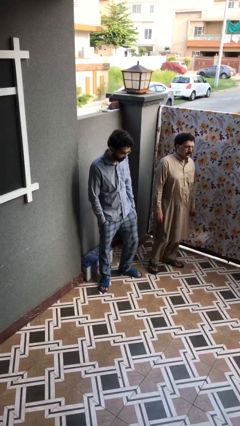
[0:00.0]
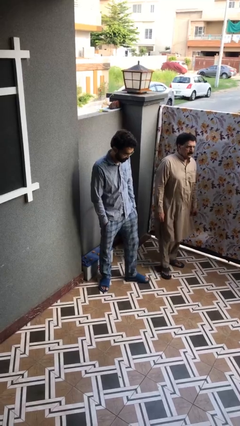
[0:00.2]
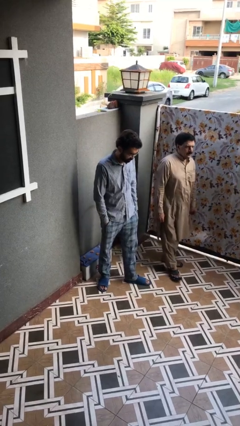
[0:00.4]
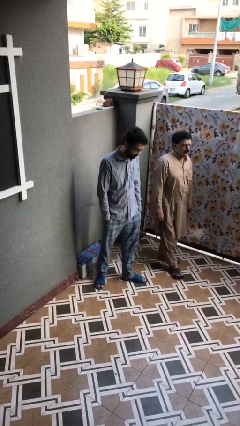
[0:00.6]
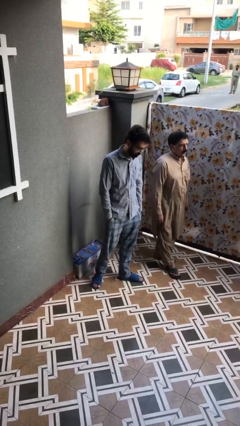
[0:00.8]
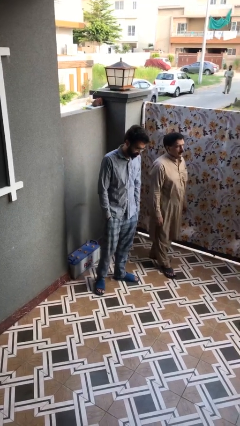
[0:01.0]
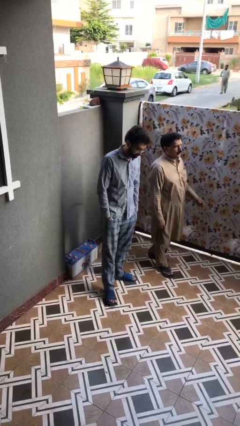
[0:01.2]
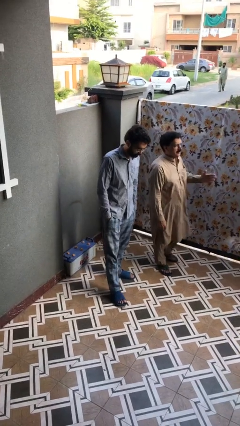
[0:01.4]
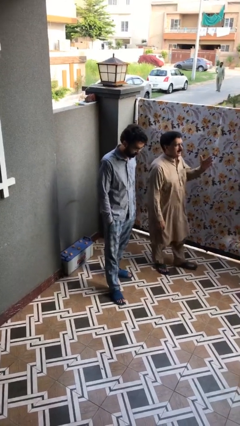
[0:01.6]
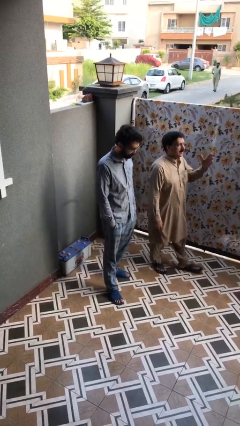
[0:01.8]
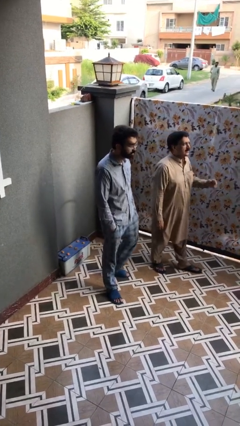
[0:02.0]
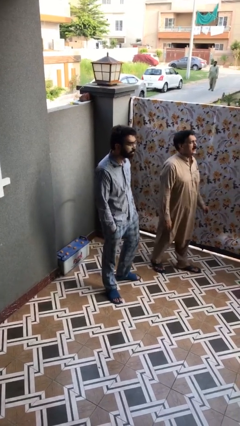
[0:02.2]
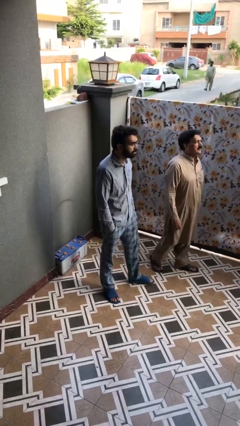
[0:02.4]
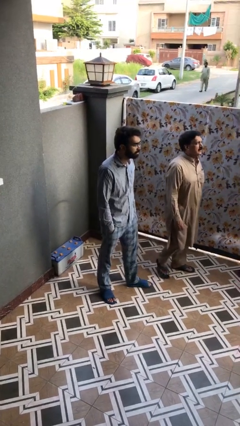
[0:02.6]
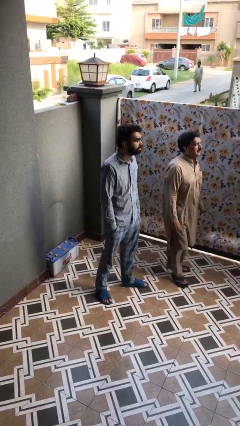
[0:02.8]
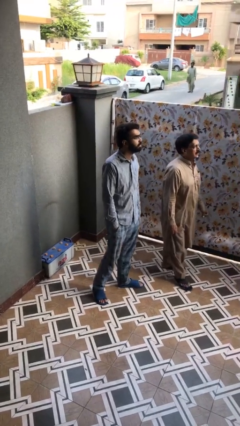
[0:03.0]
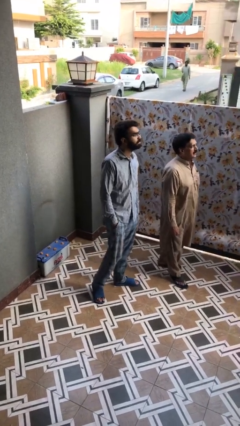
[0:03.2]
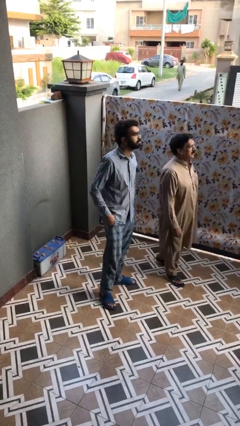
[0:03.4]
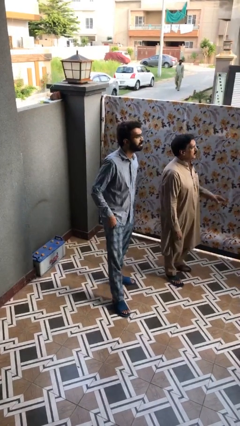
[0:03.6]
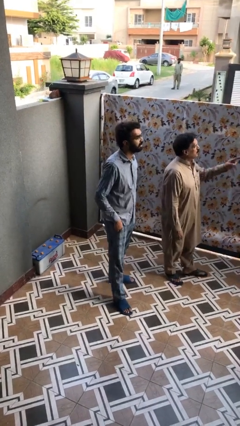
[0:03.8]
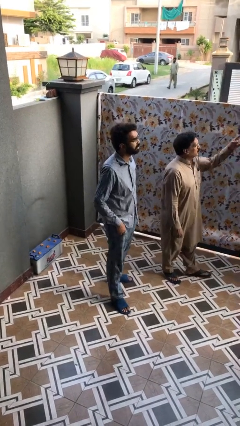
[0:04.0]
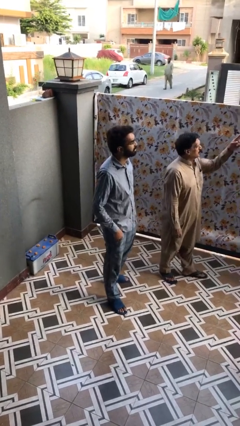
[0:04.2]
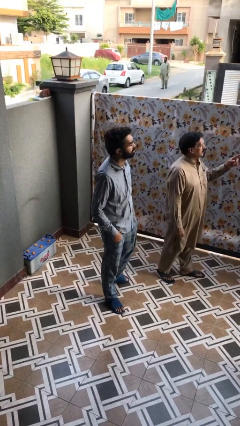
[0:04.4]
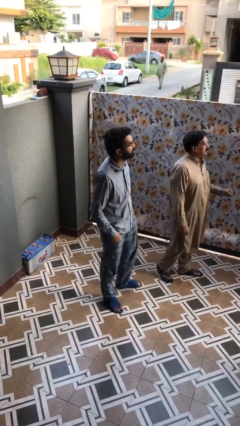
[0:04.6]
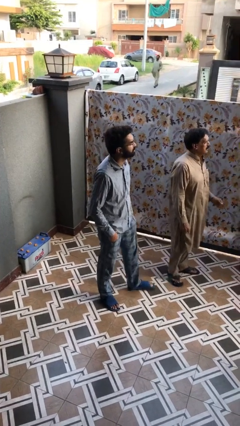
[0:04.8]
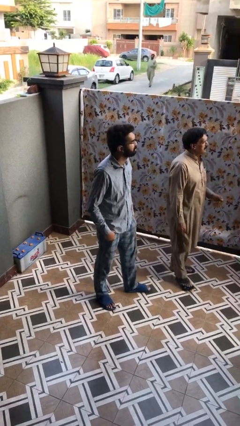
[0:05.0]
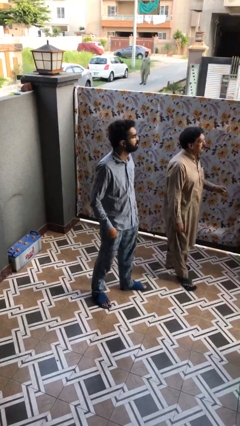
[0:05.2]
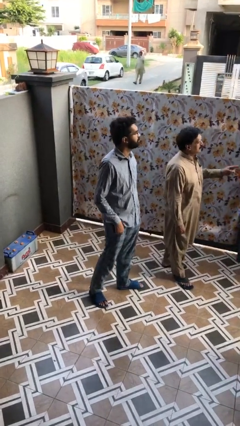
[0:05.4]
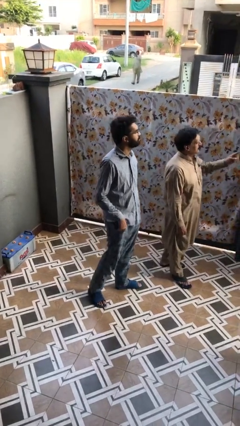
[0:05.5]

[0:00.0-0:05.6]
person talks to person

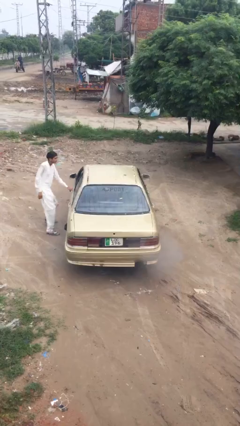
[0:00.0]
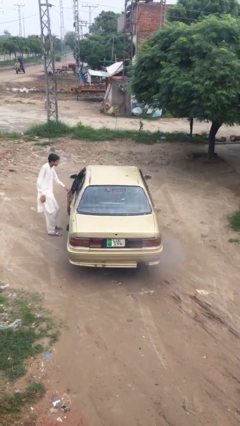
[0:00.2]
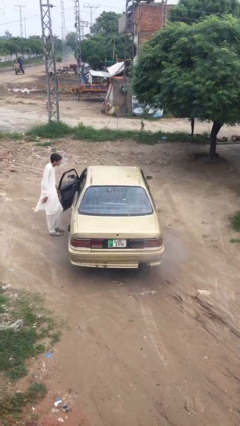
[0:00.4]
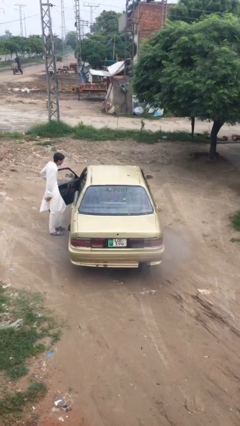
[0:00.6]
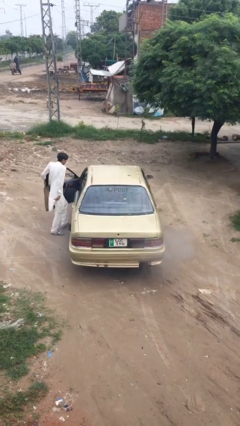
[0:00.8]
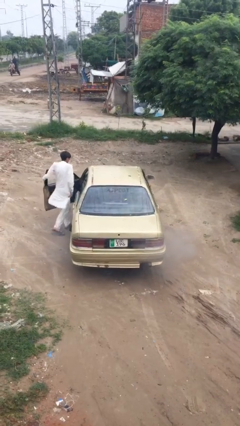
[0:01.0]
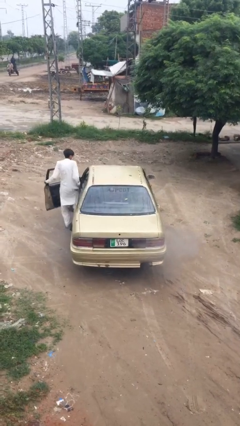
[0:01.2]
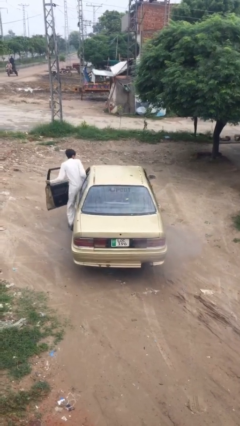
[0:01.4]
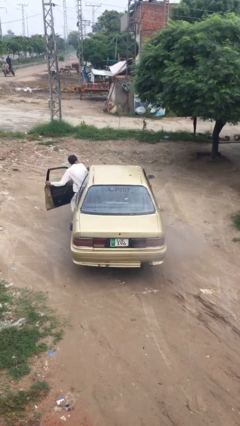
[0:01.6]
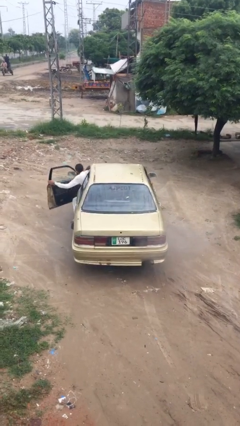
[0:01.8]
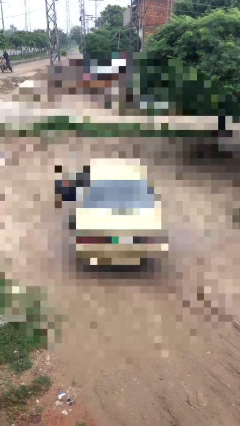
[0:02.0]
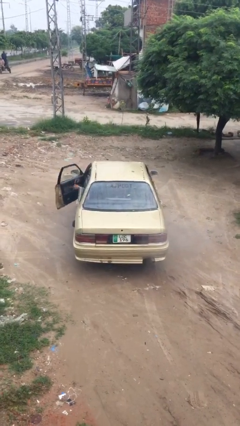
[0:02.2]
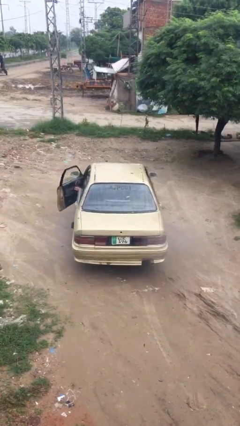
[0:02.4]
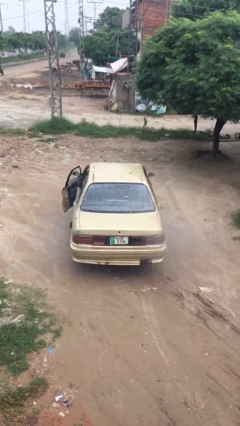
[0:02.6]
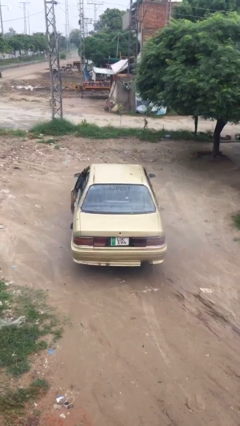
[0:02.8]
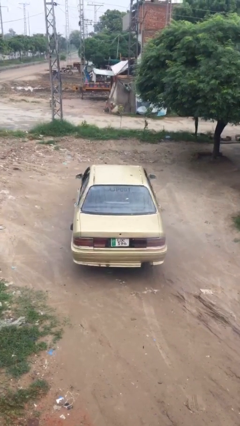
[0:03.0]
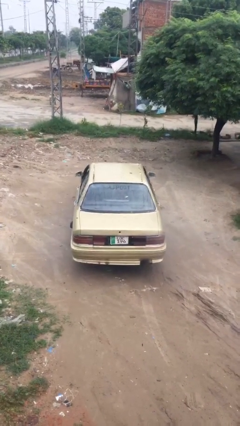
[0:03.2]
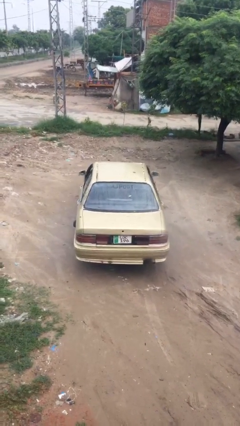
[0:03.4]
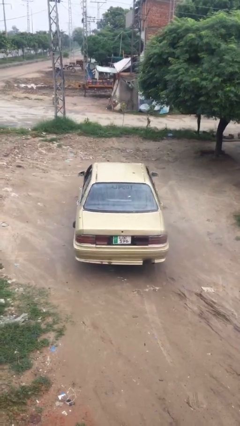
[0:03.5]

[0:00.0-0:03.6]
car picks up person

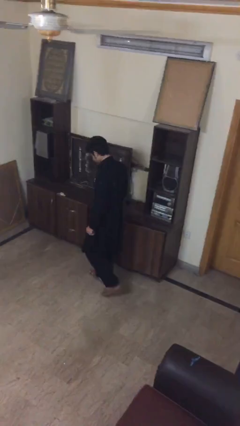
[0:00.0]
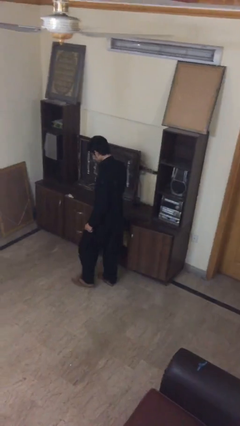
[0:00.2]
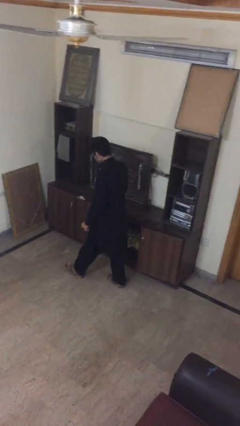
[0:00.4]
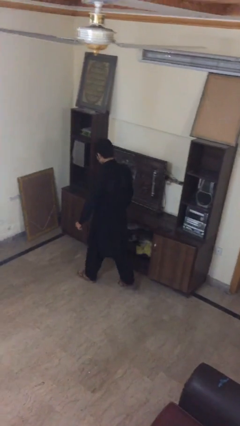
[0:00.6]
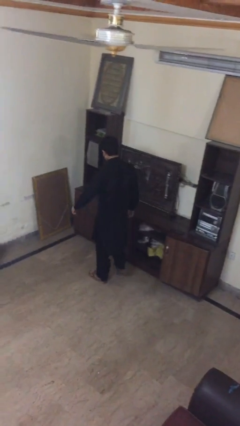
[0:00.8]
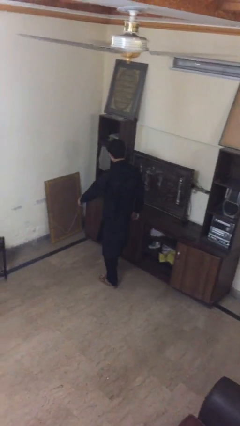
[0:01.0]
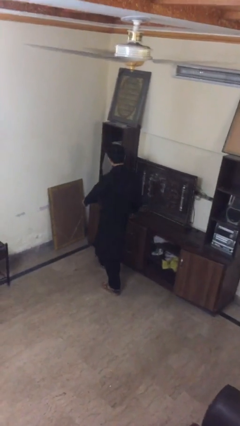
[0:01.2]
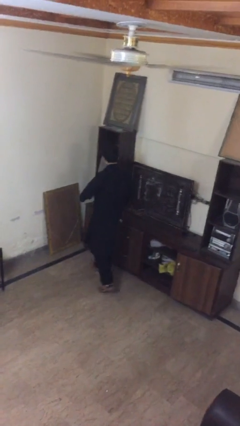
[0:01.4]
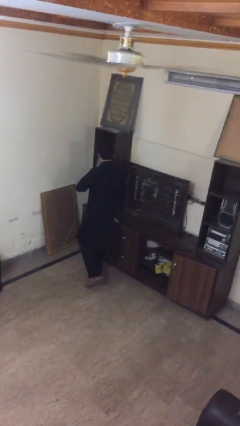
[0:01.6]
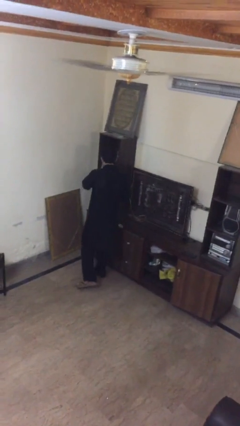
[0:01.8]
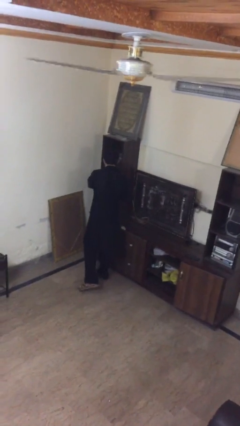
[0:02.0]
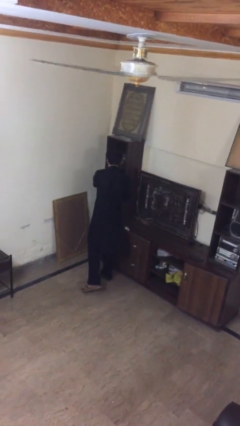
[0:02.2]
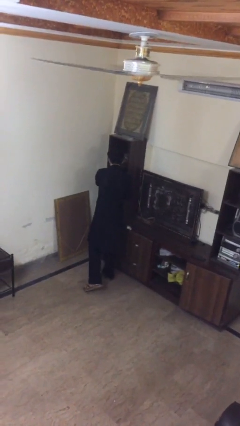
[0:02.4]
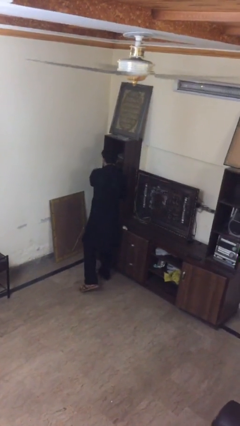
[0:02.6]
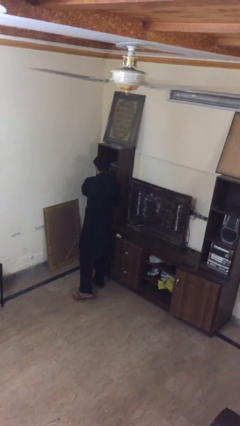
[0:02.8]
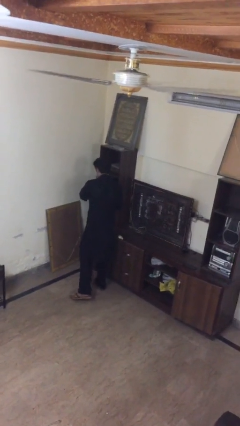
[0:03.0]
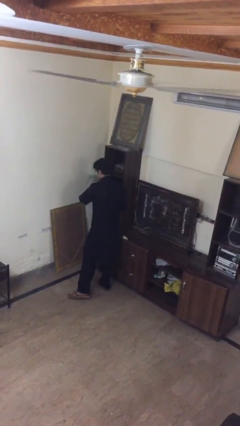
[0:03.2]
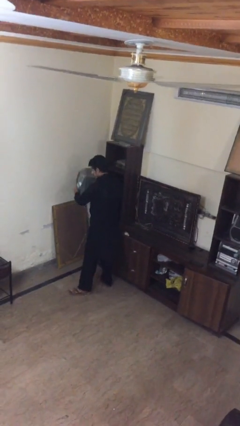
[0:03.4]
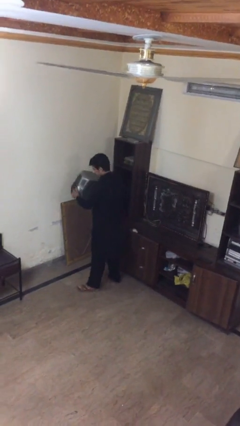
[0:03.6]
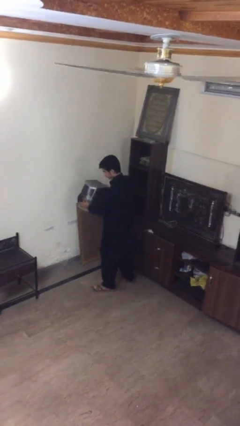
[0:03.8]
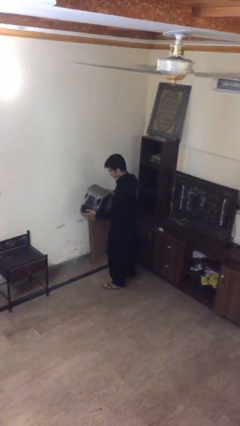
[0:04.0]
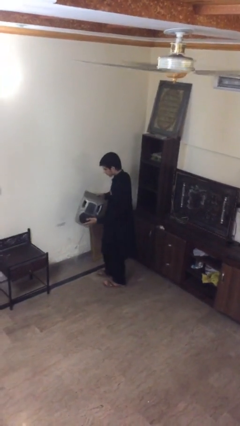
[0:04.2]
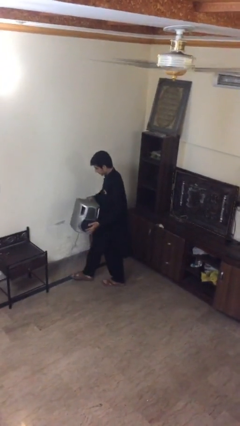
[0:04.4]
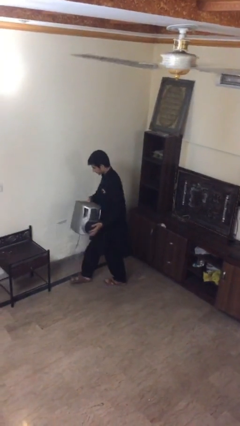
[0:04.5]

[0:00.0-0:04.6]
person picks up object from shelf

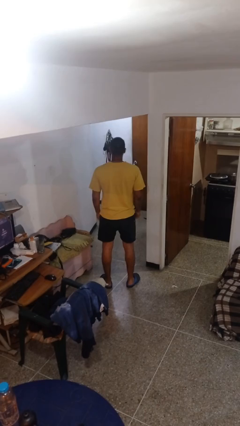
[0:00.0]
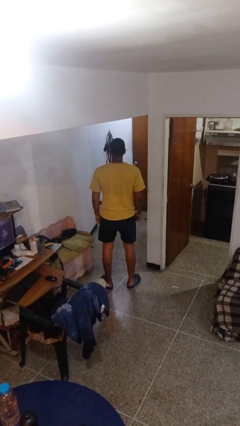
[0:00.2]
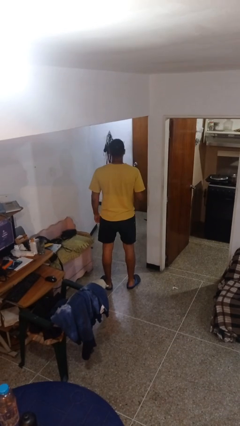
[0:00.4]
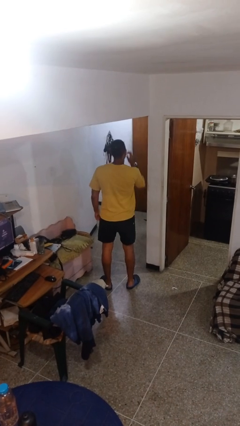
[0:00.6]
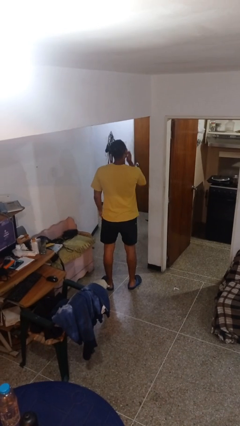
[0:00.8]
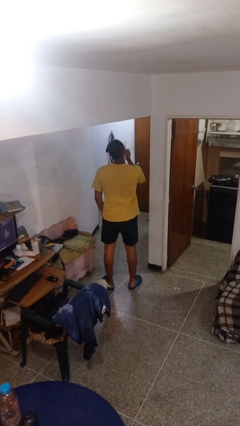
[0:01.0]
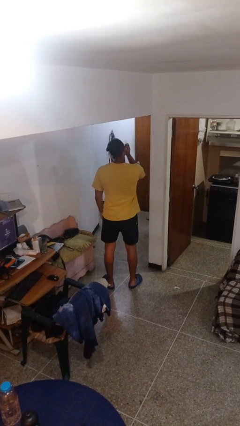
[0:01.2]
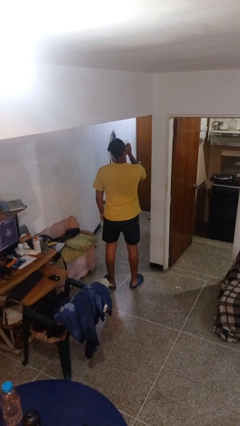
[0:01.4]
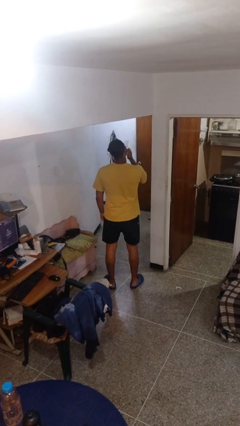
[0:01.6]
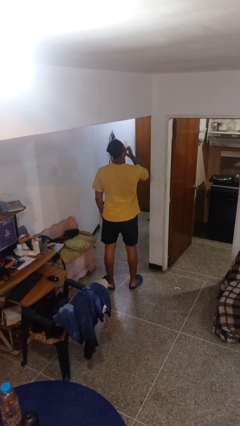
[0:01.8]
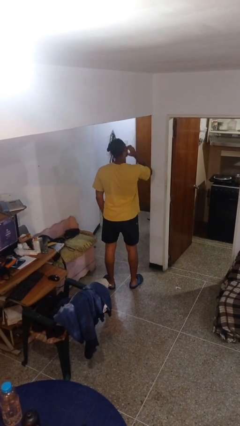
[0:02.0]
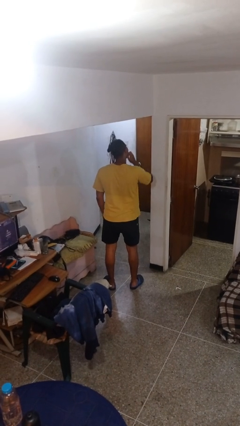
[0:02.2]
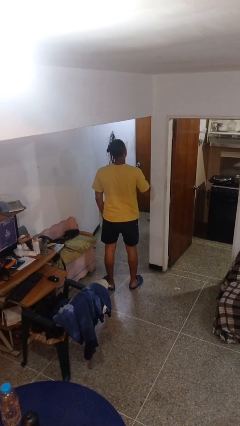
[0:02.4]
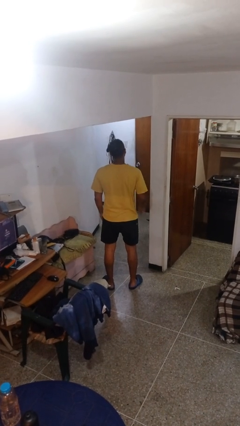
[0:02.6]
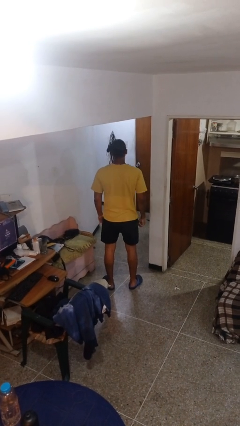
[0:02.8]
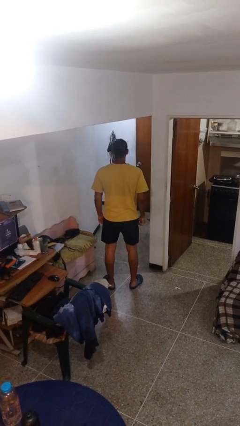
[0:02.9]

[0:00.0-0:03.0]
person scratches face

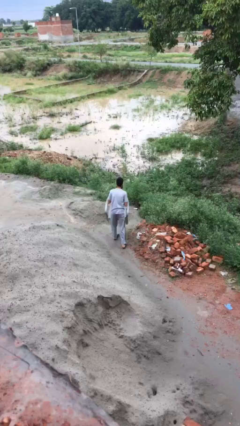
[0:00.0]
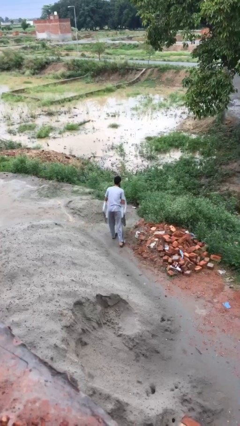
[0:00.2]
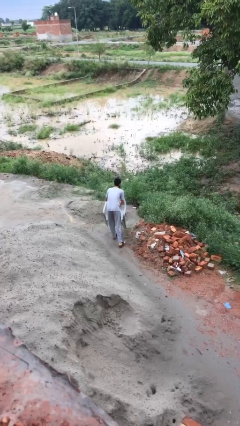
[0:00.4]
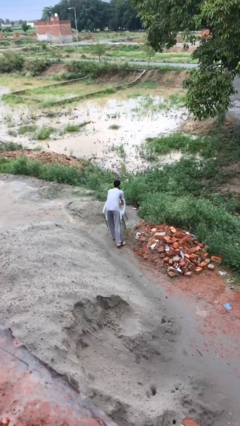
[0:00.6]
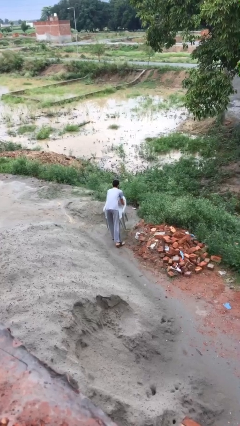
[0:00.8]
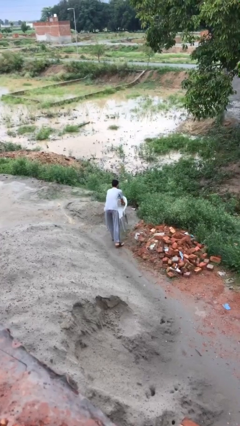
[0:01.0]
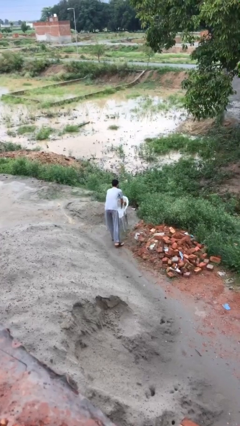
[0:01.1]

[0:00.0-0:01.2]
person carries heavy object

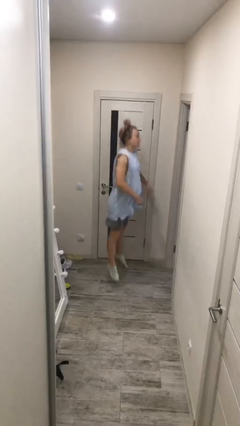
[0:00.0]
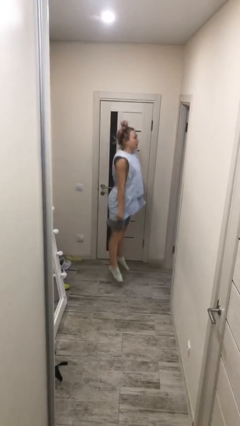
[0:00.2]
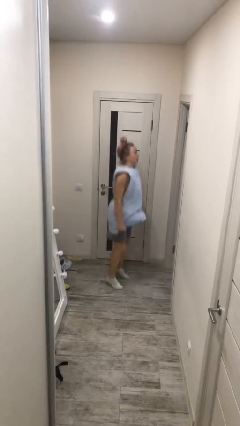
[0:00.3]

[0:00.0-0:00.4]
person jumps
